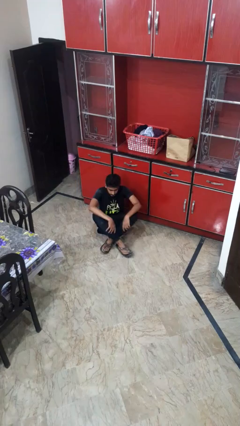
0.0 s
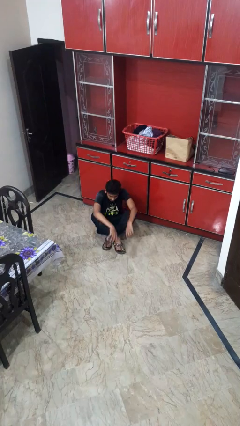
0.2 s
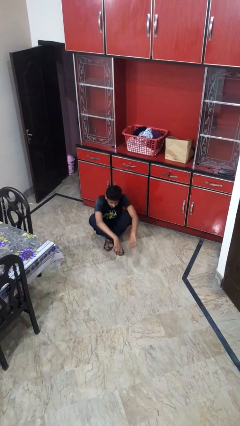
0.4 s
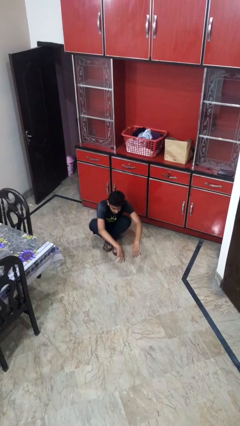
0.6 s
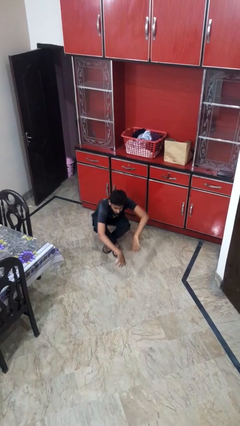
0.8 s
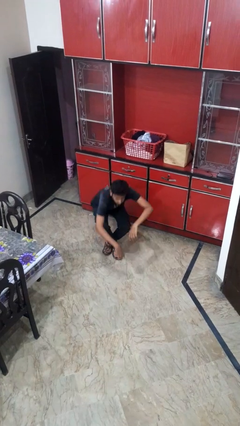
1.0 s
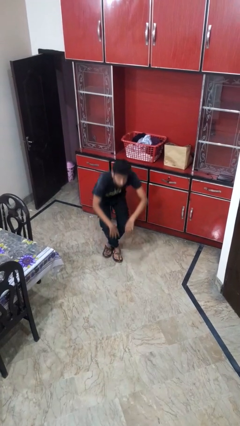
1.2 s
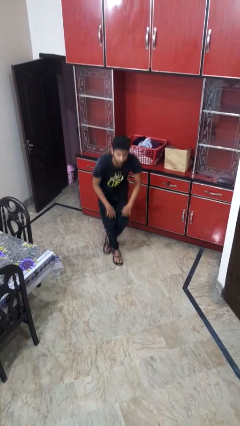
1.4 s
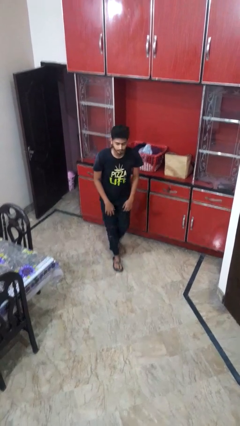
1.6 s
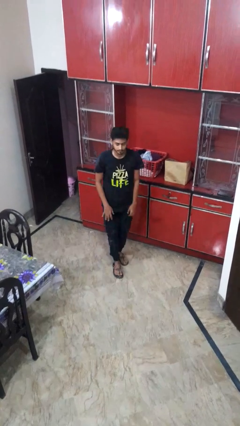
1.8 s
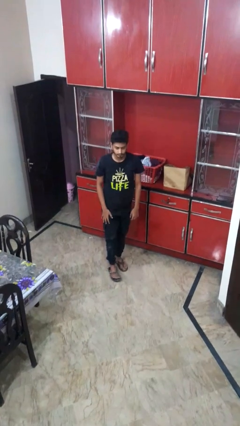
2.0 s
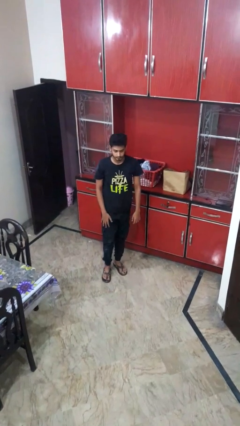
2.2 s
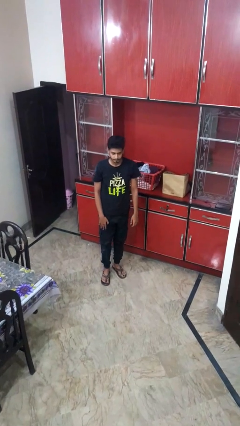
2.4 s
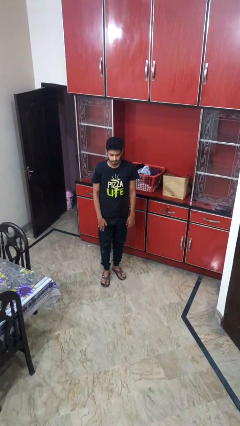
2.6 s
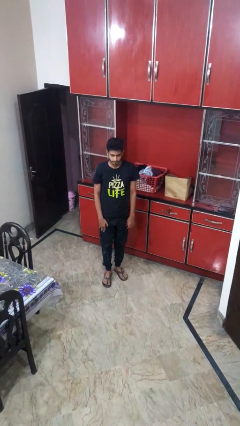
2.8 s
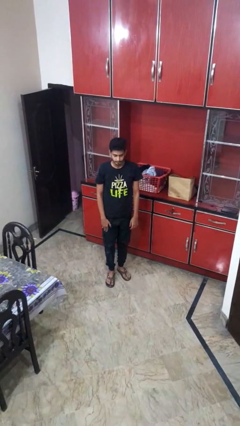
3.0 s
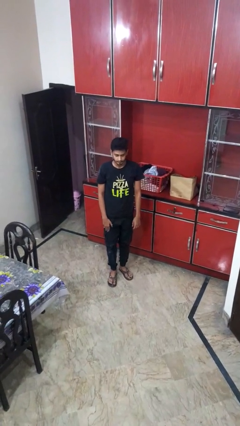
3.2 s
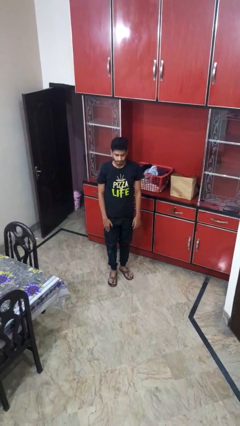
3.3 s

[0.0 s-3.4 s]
person stands up from floor

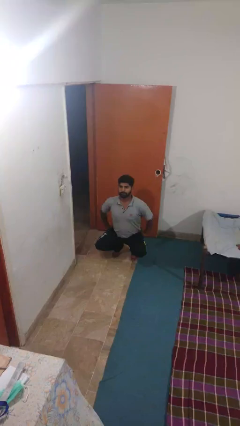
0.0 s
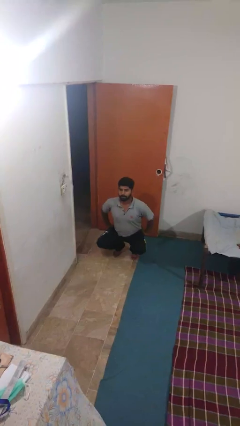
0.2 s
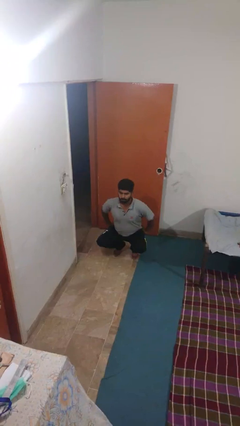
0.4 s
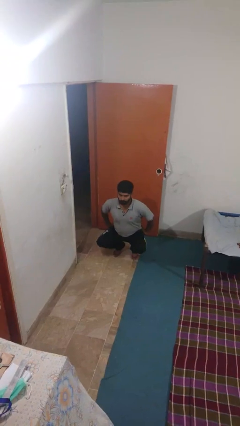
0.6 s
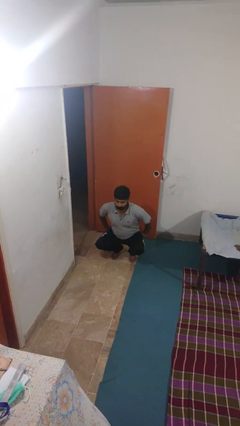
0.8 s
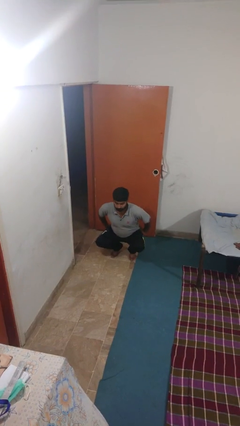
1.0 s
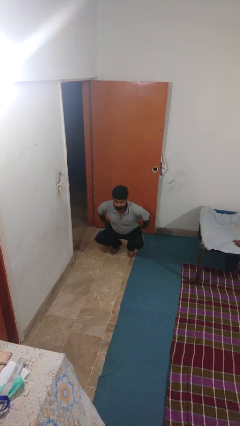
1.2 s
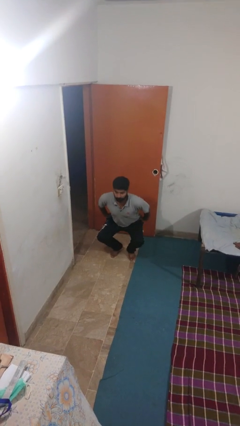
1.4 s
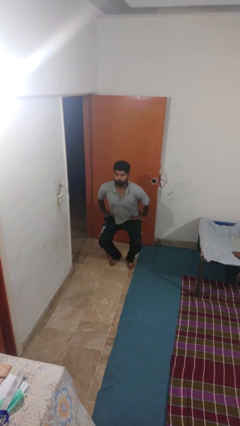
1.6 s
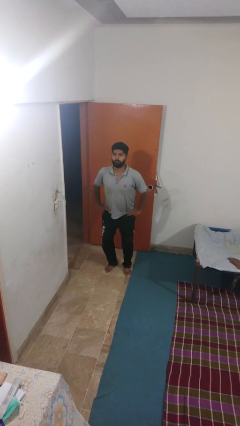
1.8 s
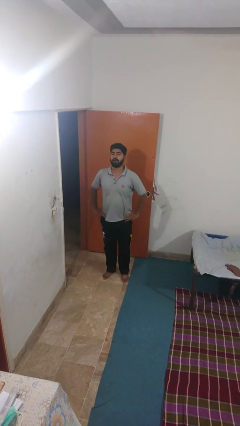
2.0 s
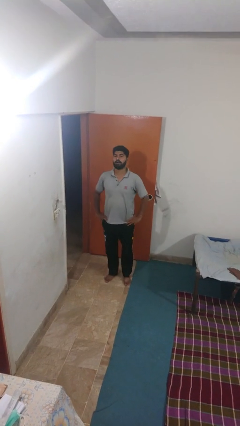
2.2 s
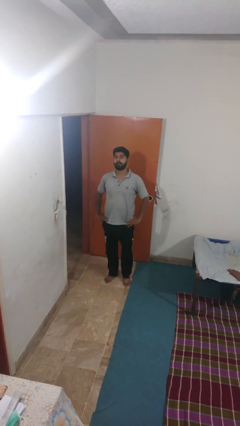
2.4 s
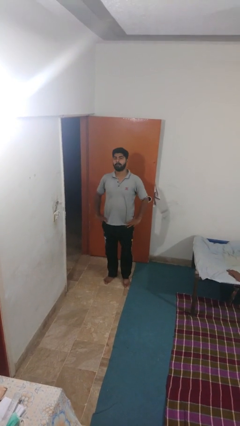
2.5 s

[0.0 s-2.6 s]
person squats

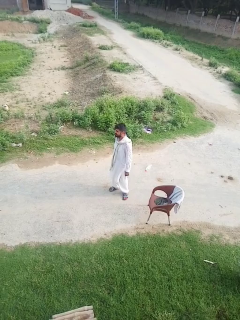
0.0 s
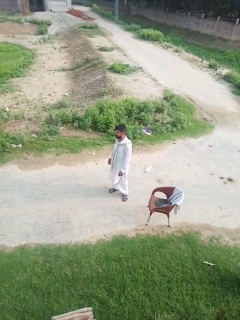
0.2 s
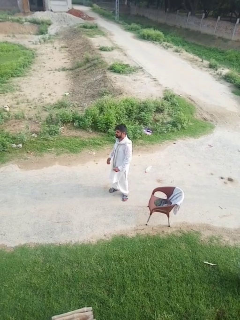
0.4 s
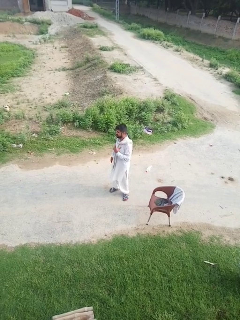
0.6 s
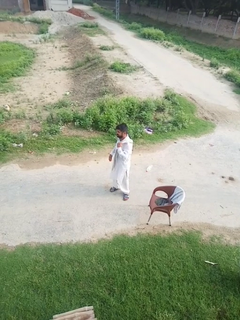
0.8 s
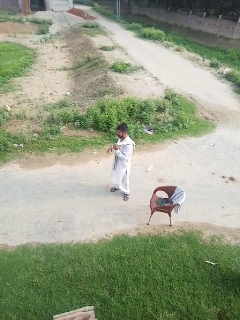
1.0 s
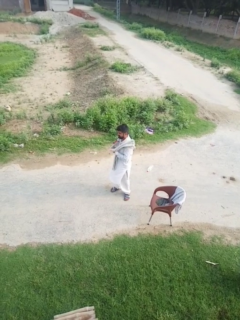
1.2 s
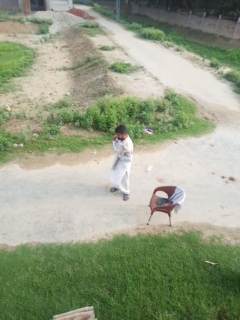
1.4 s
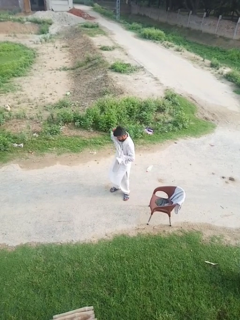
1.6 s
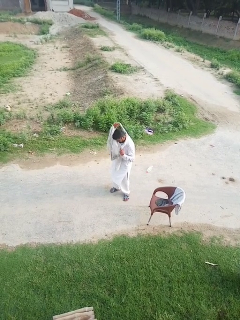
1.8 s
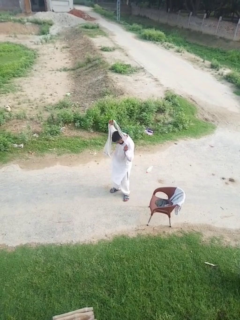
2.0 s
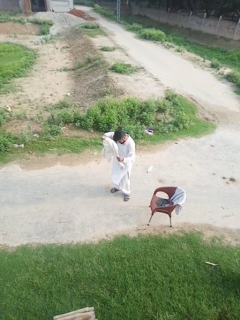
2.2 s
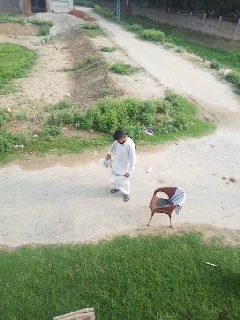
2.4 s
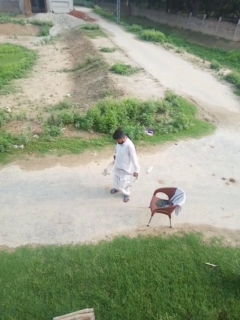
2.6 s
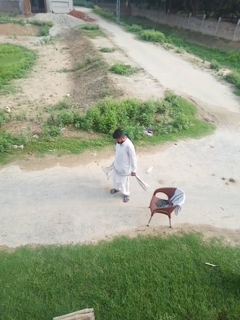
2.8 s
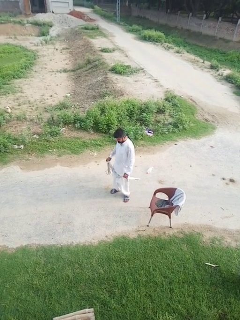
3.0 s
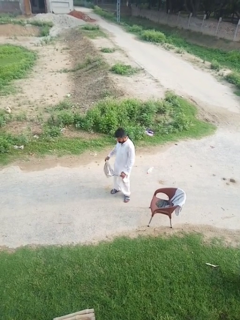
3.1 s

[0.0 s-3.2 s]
person takes off scarf

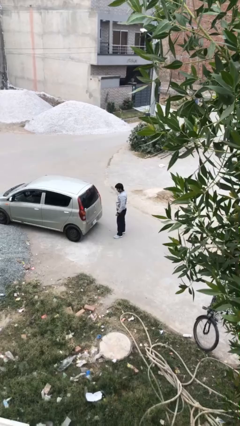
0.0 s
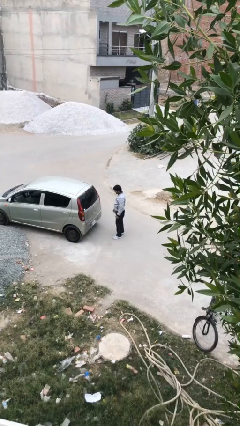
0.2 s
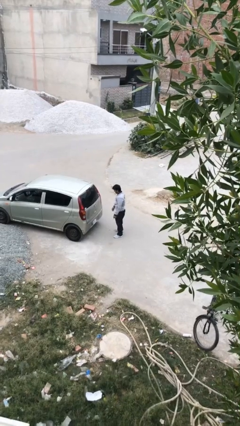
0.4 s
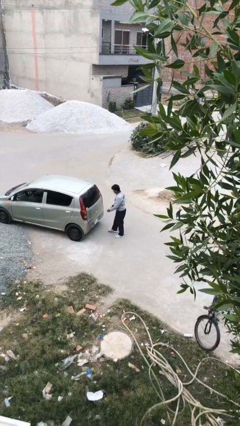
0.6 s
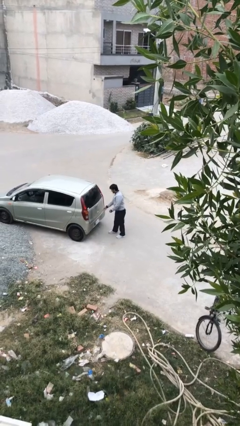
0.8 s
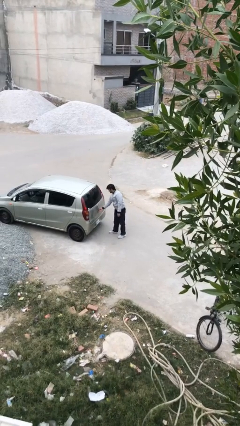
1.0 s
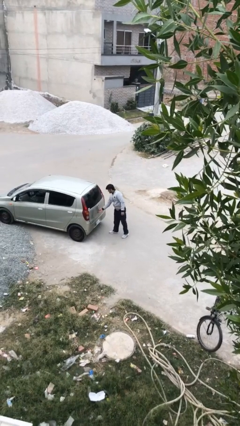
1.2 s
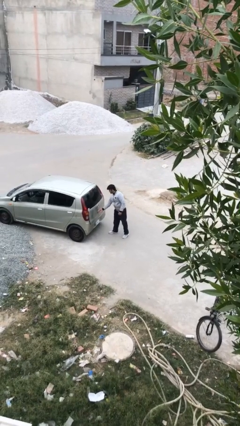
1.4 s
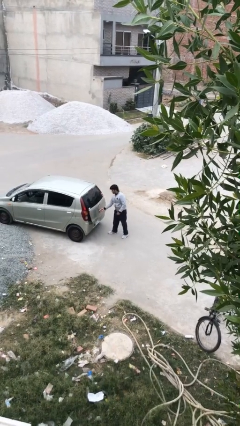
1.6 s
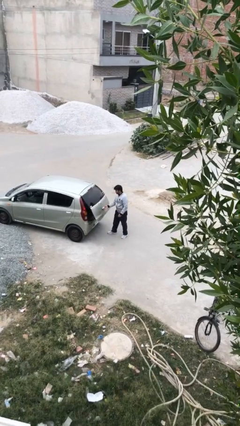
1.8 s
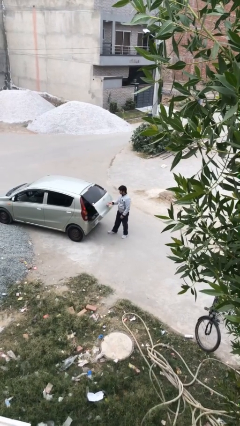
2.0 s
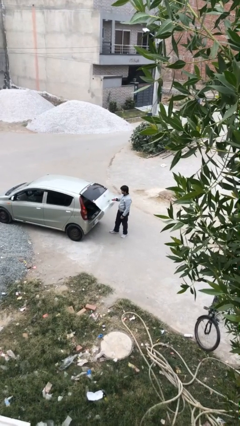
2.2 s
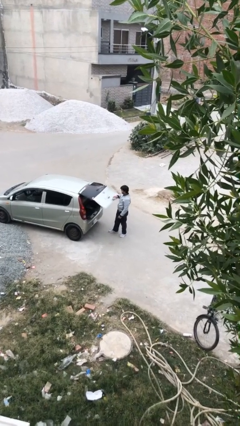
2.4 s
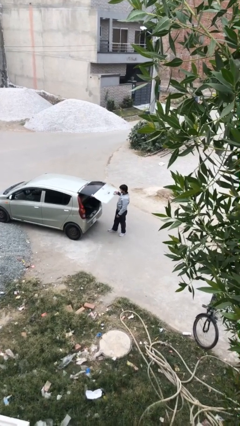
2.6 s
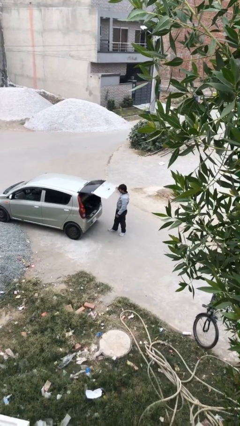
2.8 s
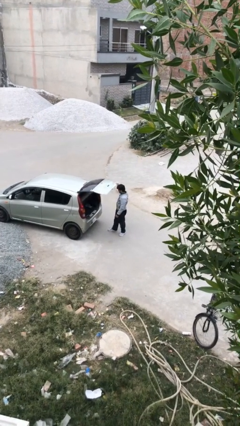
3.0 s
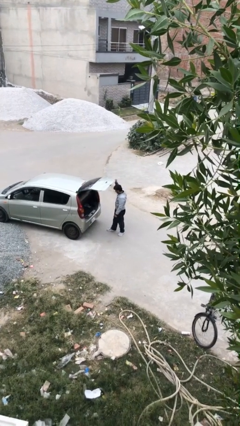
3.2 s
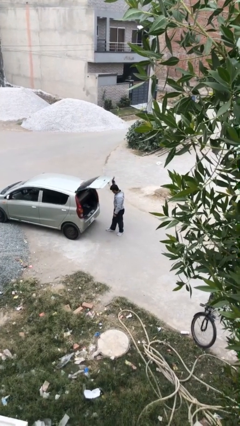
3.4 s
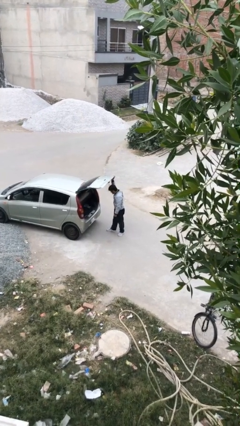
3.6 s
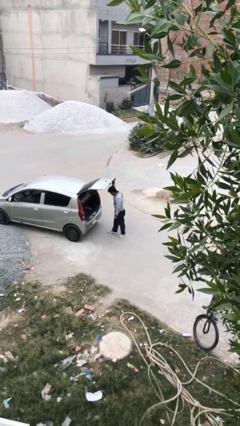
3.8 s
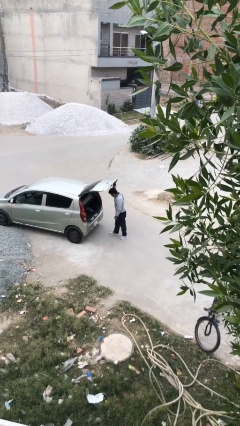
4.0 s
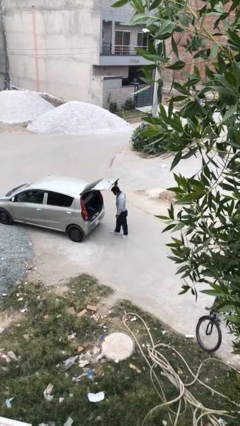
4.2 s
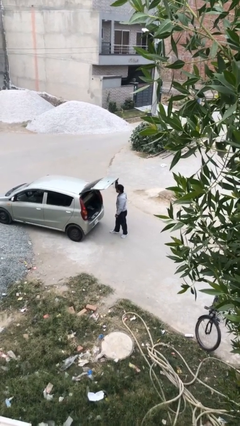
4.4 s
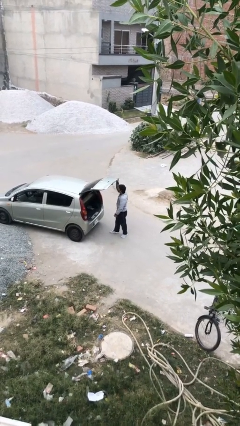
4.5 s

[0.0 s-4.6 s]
person opens car trunk

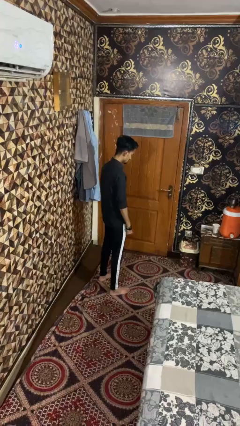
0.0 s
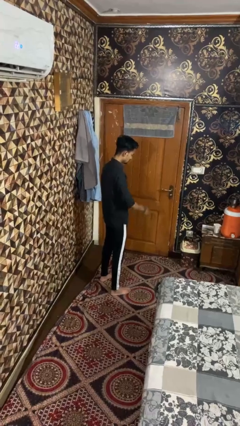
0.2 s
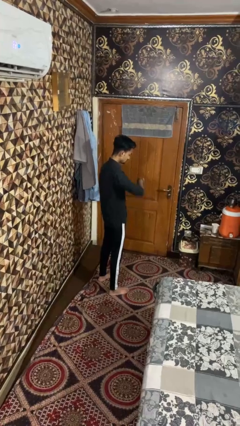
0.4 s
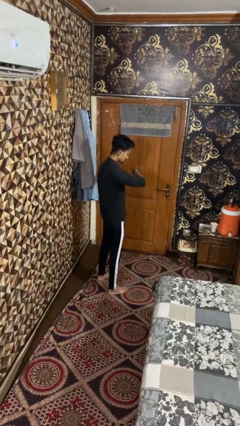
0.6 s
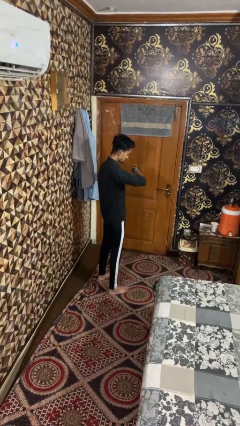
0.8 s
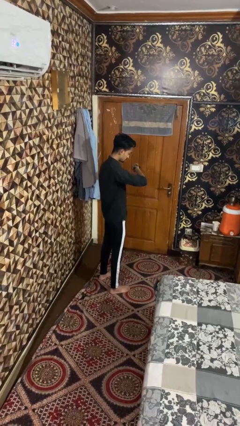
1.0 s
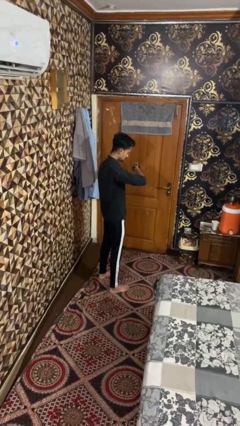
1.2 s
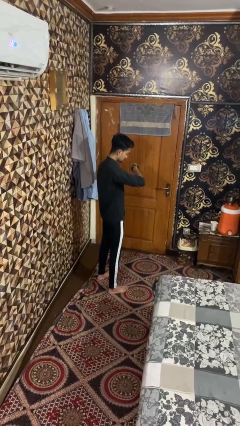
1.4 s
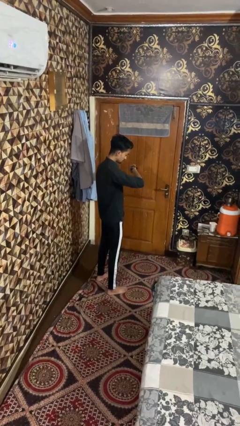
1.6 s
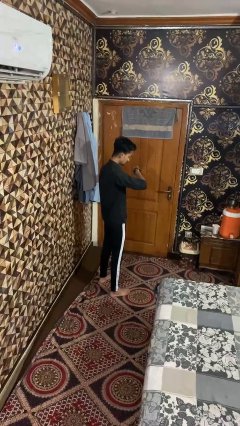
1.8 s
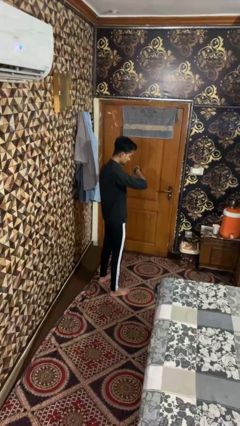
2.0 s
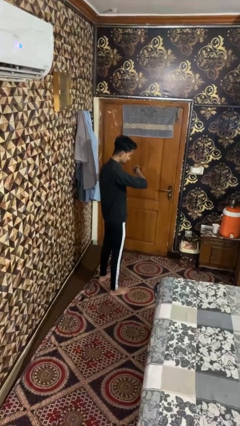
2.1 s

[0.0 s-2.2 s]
person looks at wristwatch

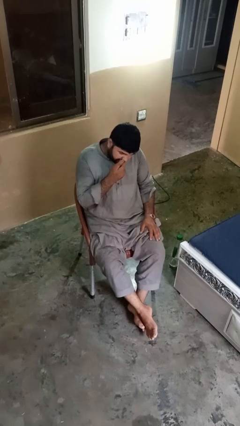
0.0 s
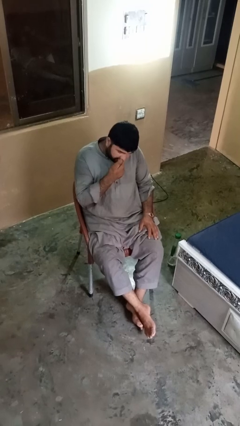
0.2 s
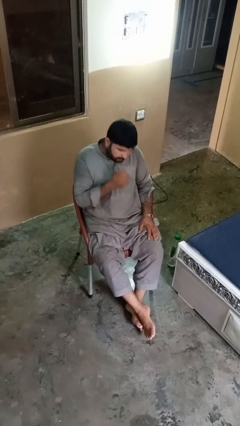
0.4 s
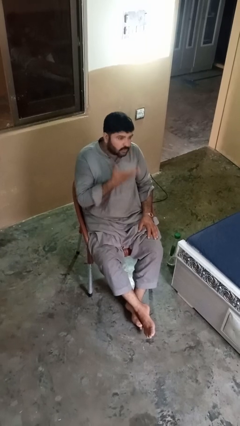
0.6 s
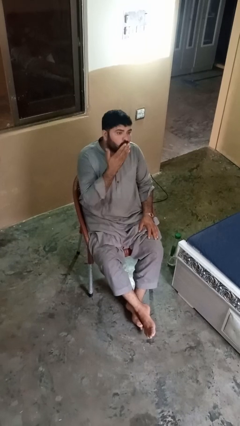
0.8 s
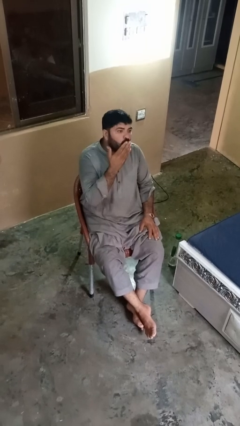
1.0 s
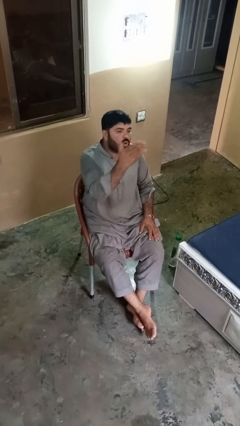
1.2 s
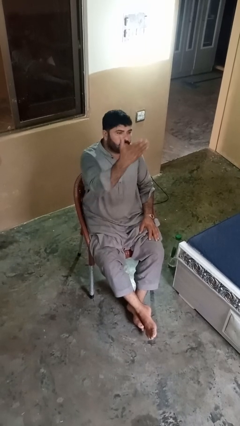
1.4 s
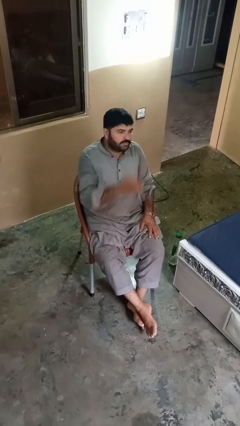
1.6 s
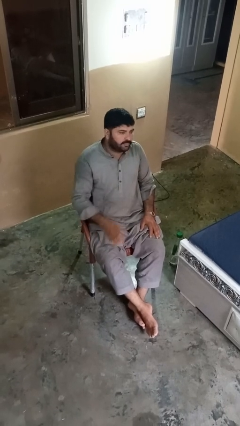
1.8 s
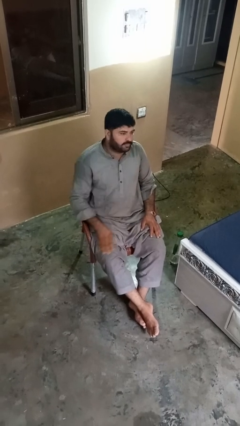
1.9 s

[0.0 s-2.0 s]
person gestures blow kiss

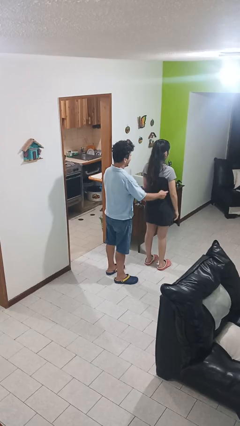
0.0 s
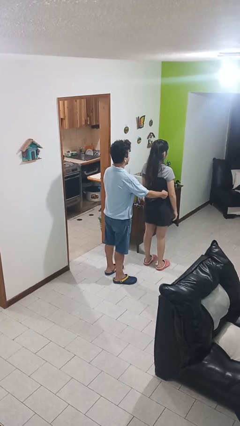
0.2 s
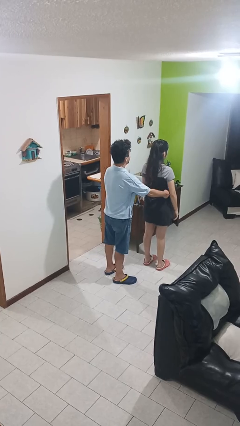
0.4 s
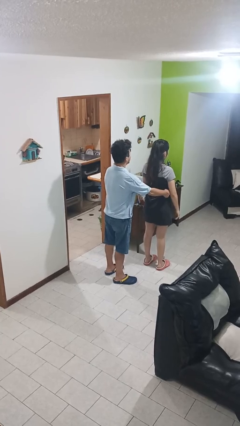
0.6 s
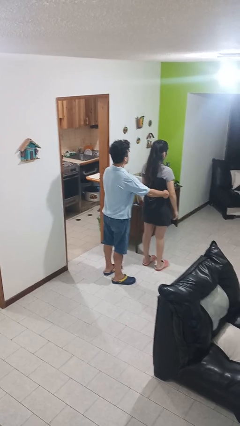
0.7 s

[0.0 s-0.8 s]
person tickles person
